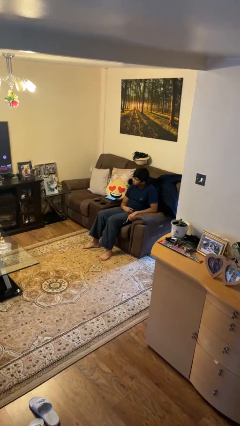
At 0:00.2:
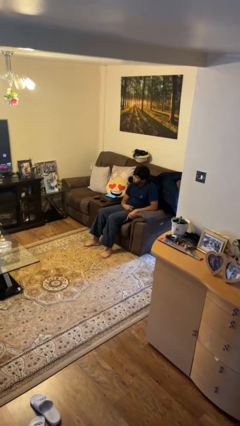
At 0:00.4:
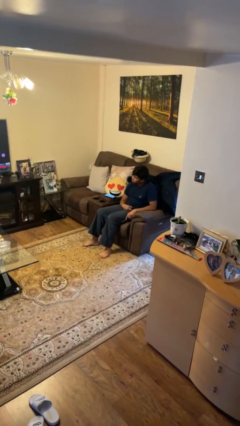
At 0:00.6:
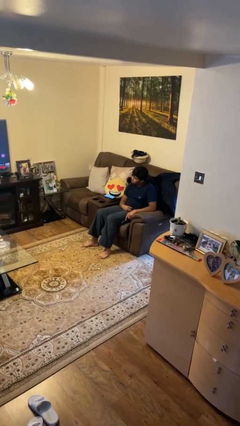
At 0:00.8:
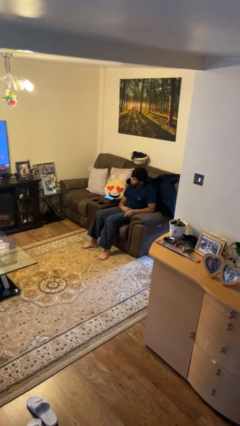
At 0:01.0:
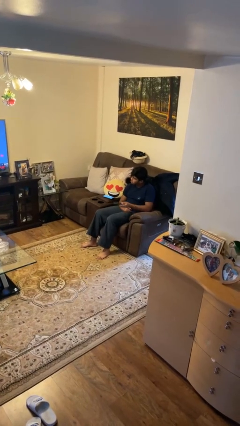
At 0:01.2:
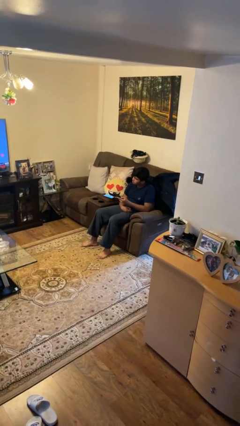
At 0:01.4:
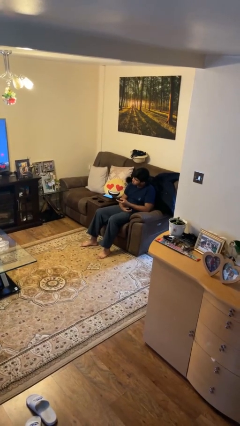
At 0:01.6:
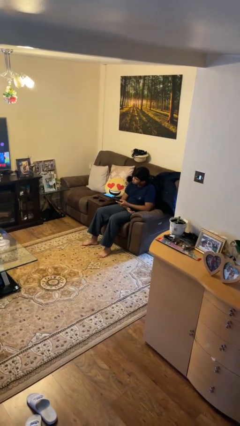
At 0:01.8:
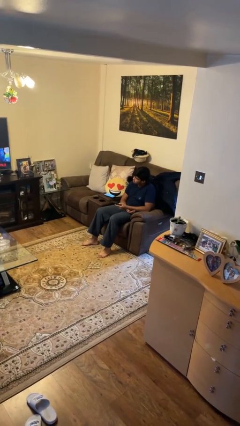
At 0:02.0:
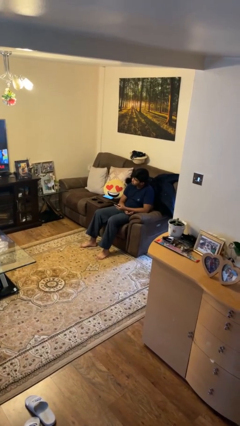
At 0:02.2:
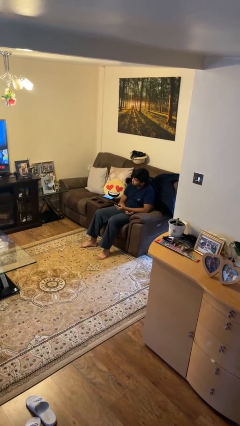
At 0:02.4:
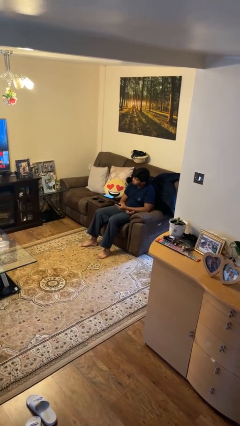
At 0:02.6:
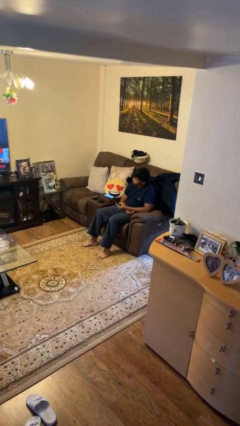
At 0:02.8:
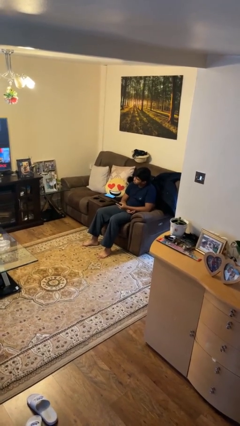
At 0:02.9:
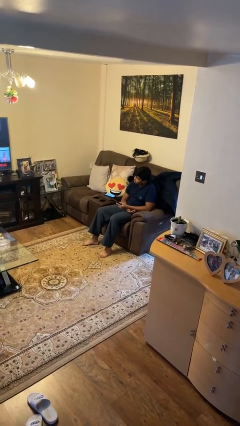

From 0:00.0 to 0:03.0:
person uses television remote

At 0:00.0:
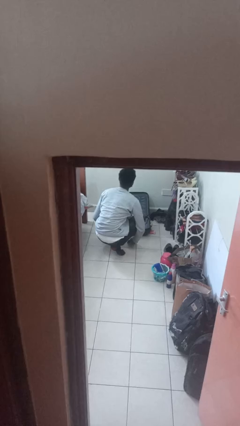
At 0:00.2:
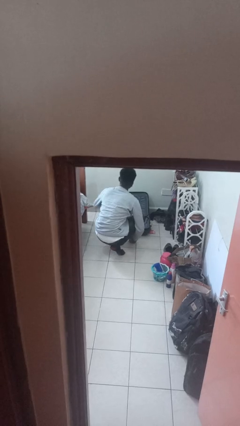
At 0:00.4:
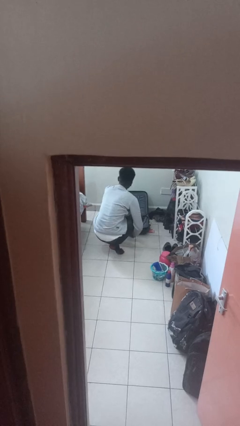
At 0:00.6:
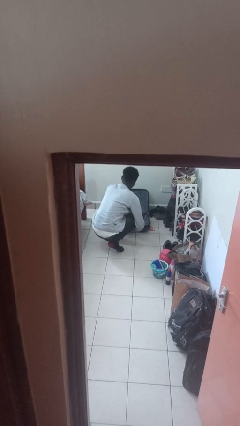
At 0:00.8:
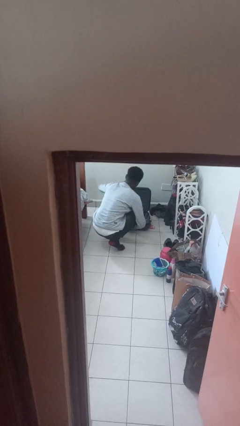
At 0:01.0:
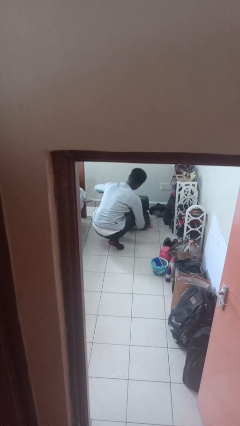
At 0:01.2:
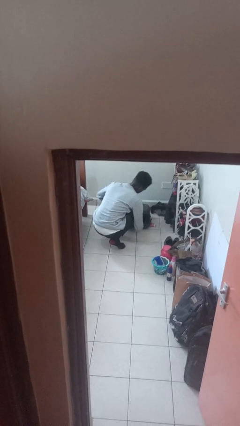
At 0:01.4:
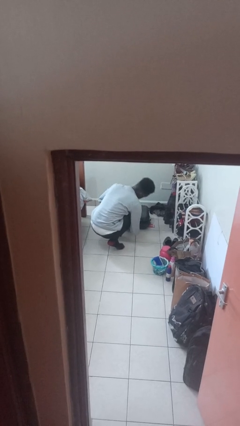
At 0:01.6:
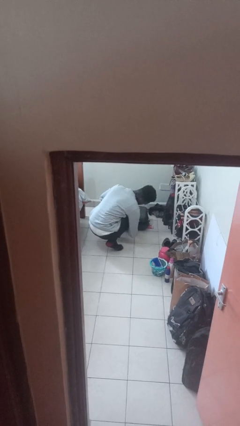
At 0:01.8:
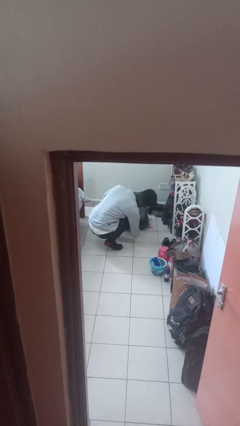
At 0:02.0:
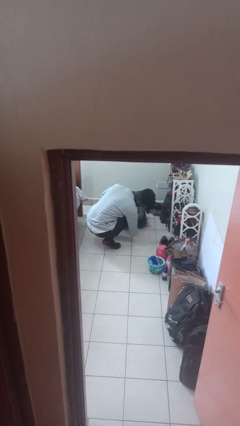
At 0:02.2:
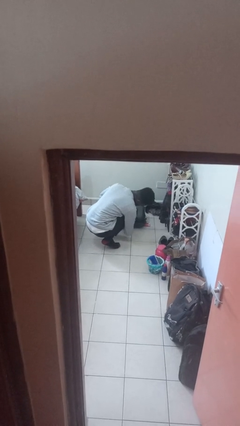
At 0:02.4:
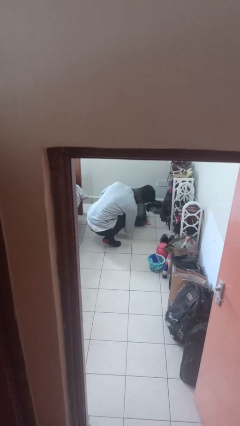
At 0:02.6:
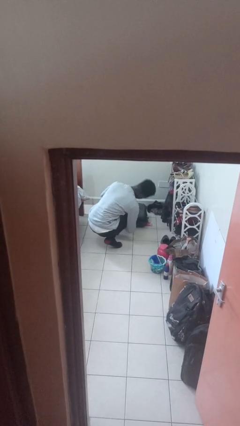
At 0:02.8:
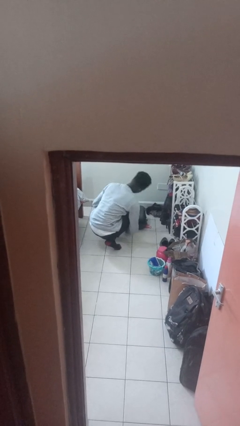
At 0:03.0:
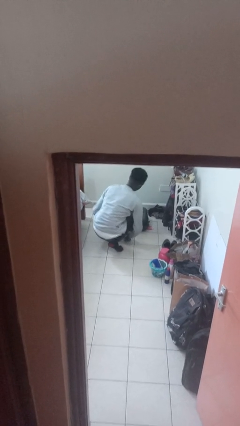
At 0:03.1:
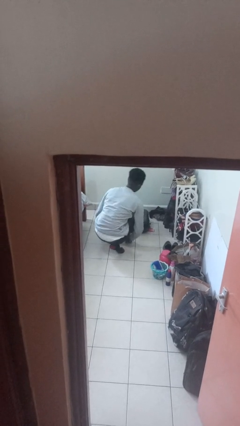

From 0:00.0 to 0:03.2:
person closes suitcase

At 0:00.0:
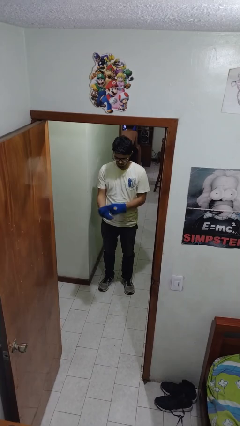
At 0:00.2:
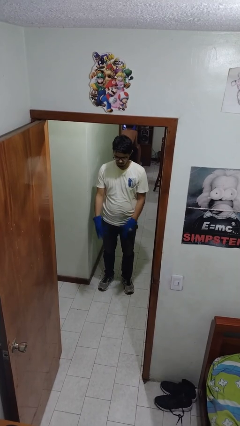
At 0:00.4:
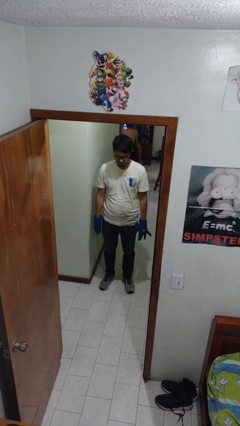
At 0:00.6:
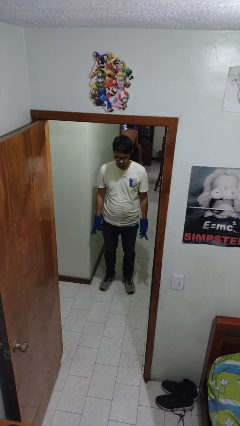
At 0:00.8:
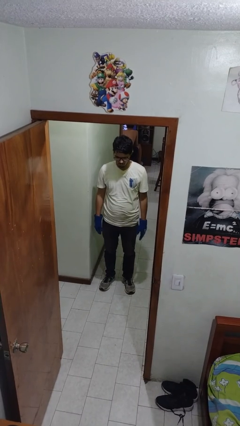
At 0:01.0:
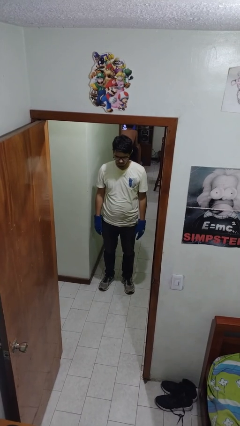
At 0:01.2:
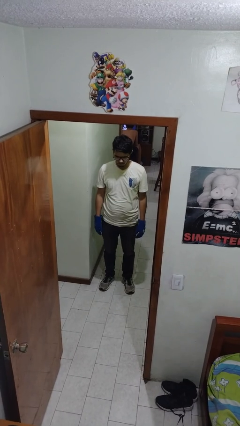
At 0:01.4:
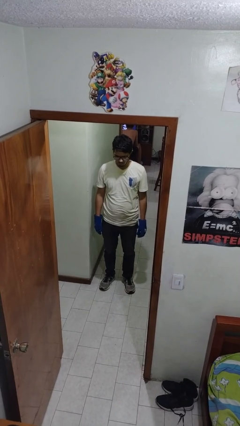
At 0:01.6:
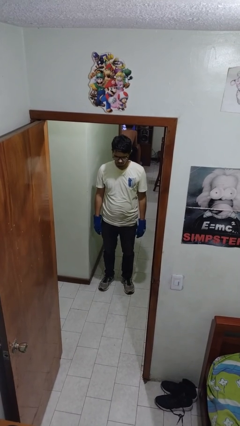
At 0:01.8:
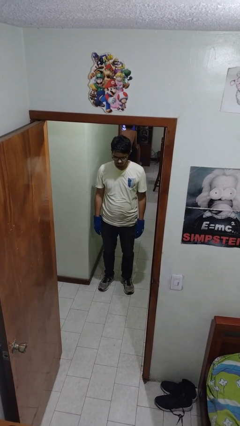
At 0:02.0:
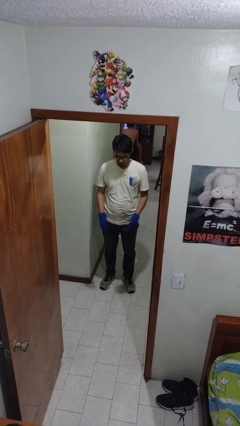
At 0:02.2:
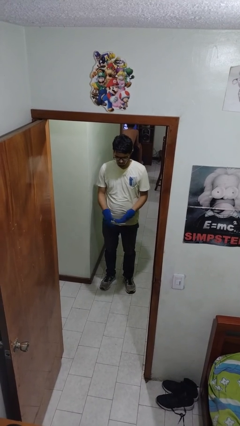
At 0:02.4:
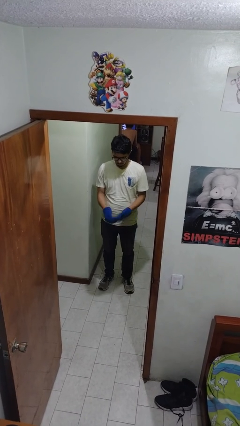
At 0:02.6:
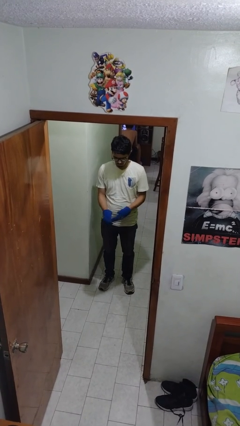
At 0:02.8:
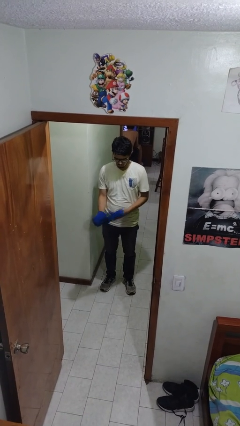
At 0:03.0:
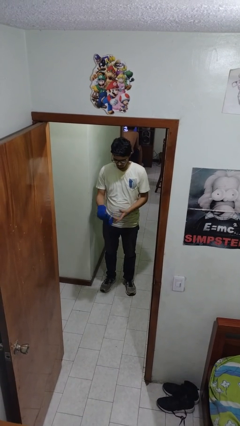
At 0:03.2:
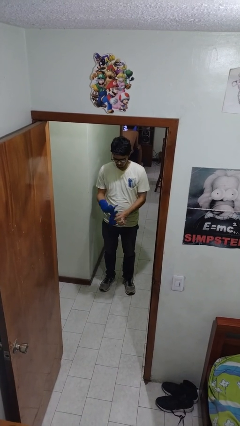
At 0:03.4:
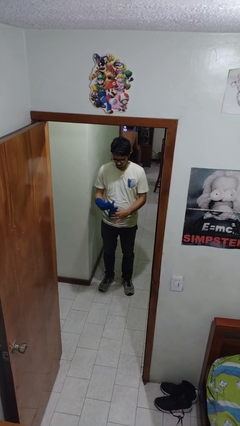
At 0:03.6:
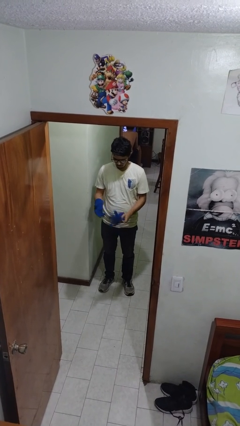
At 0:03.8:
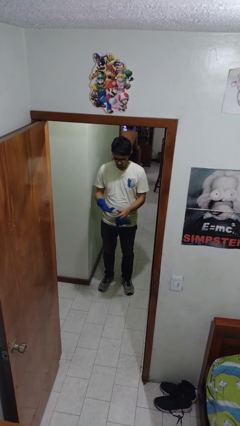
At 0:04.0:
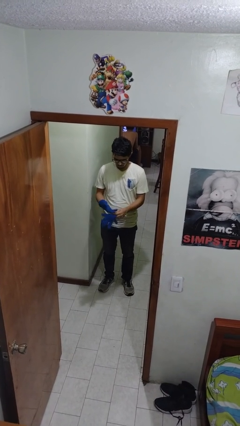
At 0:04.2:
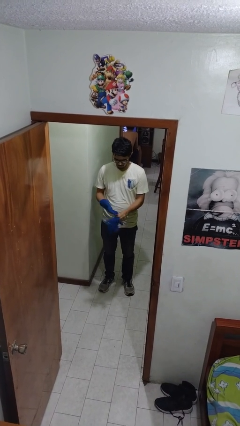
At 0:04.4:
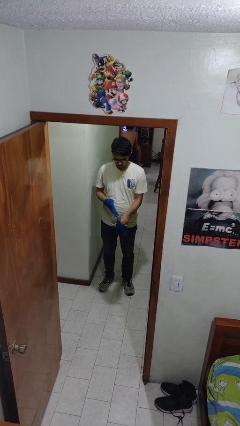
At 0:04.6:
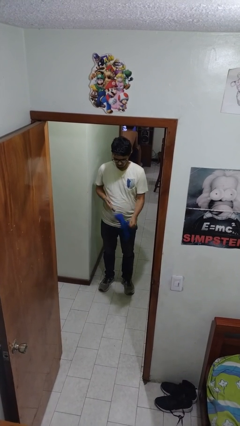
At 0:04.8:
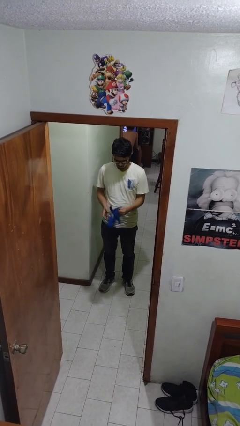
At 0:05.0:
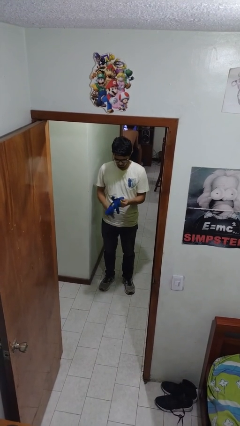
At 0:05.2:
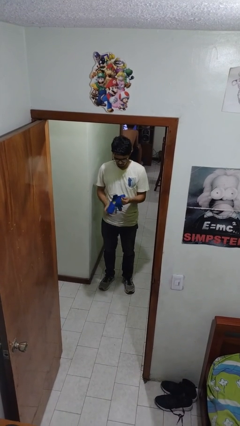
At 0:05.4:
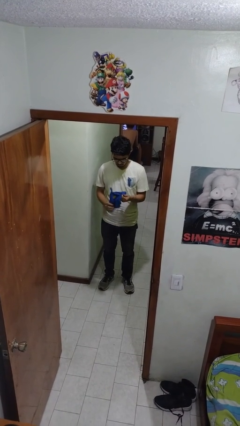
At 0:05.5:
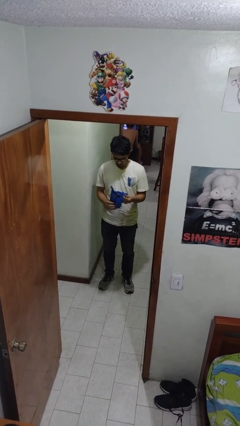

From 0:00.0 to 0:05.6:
person takes off gloves

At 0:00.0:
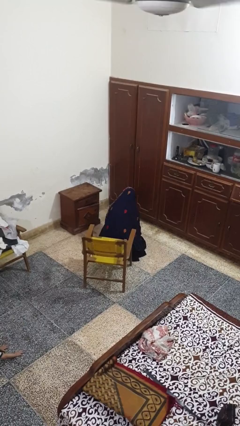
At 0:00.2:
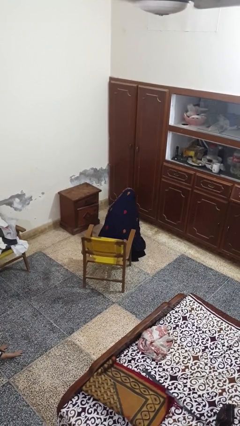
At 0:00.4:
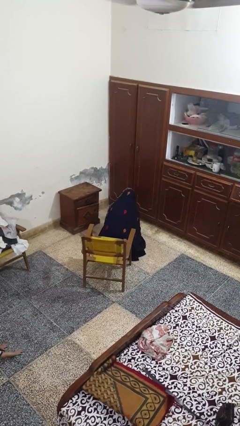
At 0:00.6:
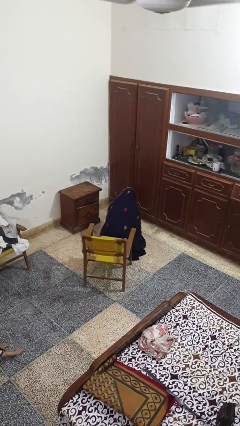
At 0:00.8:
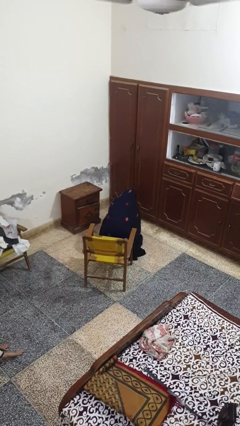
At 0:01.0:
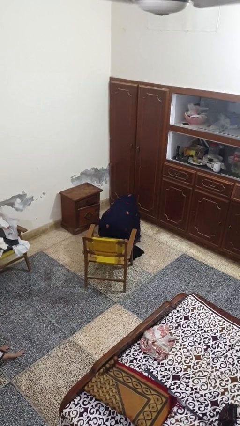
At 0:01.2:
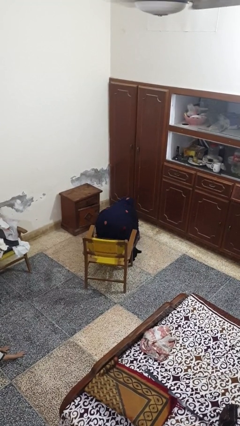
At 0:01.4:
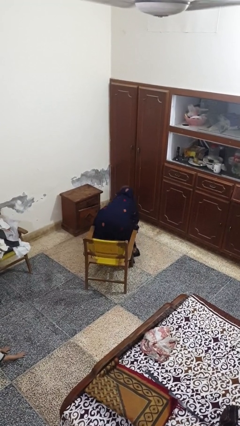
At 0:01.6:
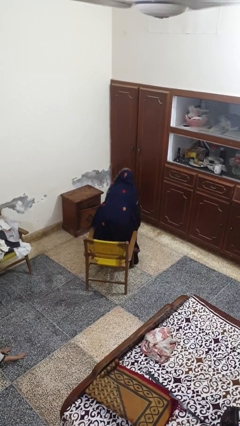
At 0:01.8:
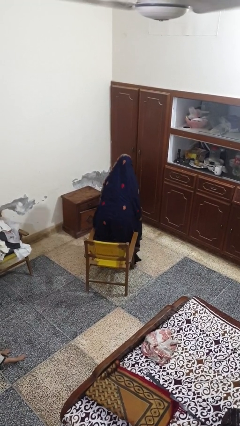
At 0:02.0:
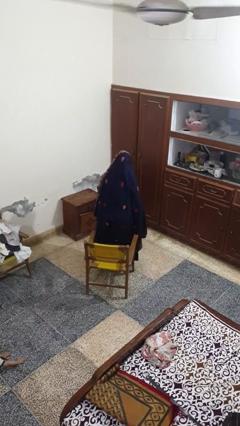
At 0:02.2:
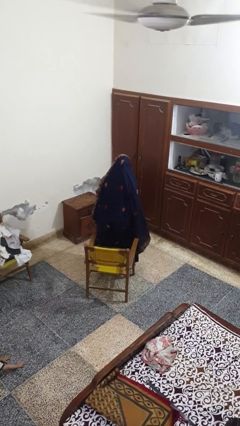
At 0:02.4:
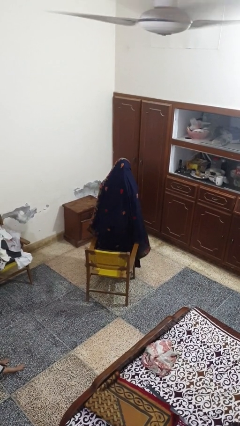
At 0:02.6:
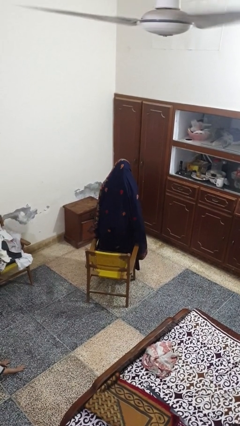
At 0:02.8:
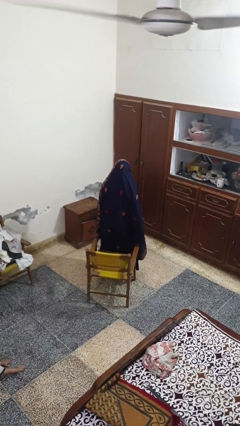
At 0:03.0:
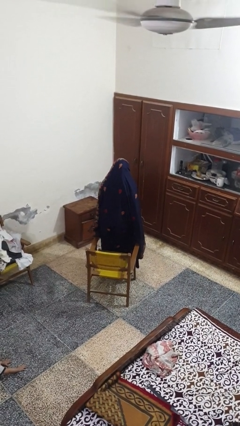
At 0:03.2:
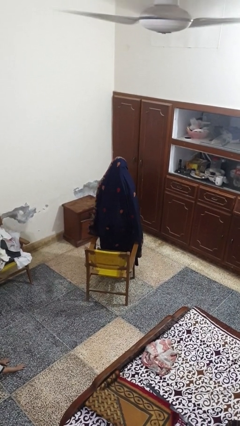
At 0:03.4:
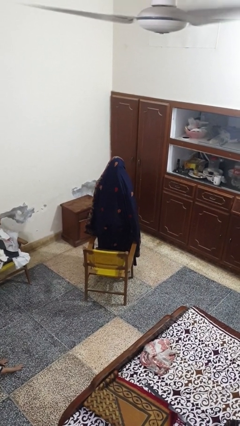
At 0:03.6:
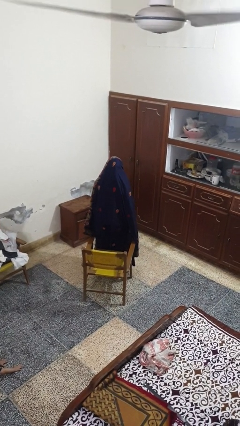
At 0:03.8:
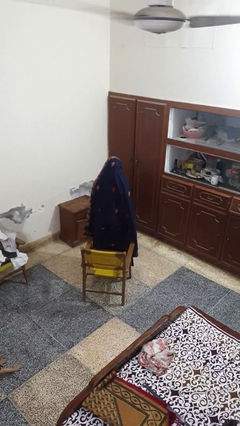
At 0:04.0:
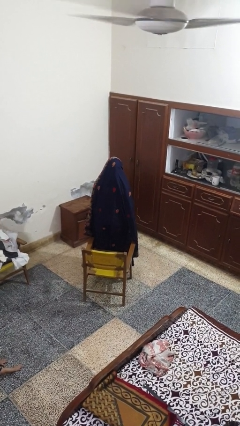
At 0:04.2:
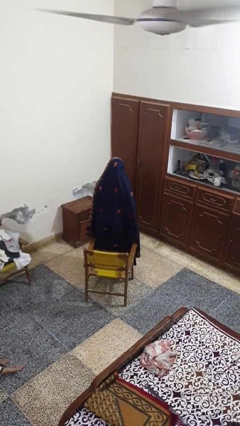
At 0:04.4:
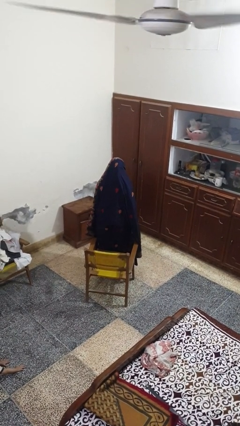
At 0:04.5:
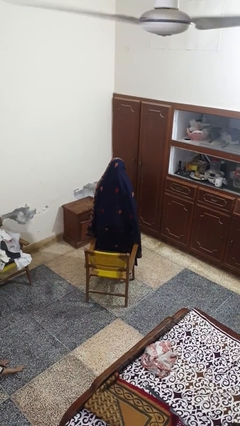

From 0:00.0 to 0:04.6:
person stands up from floor

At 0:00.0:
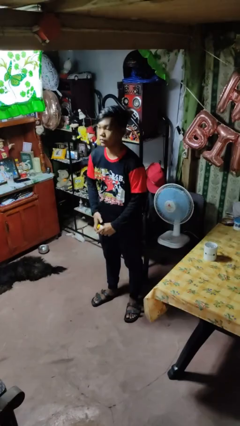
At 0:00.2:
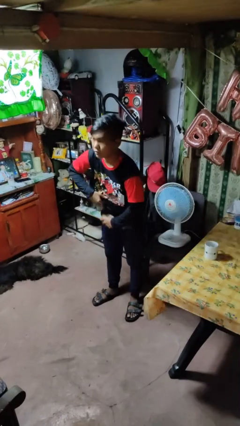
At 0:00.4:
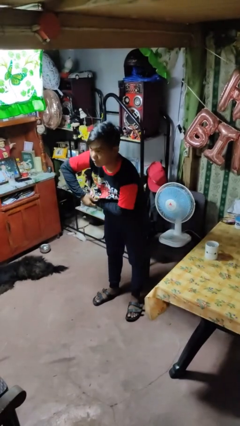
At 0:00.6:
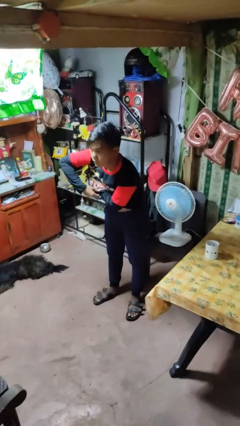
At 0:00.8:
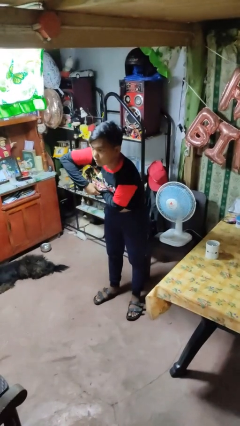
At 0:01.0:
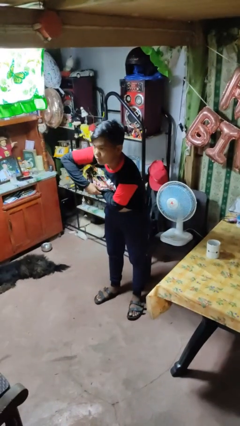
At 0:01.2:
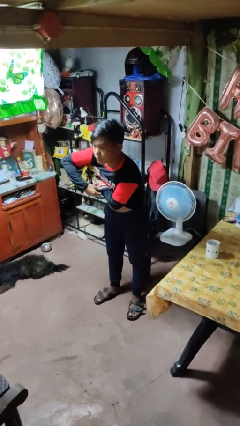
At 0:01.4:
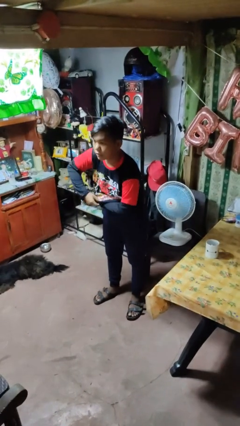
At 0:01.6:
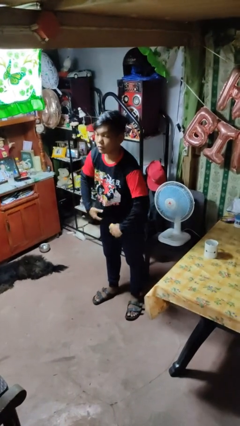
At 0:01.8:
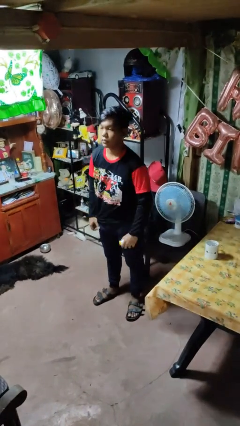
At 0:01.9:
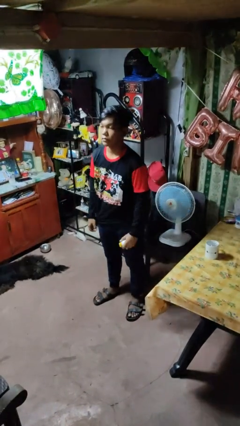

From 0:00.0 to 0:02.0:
person applies deodorant
